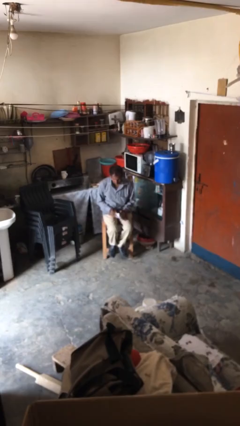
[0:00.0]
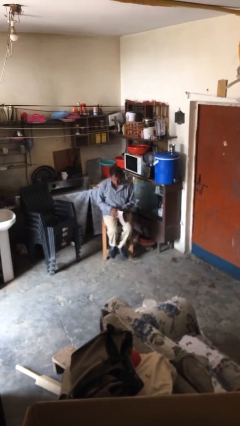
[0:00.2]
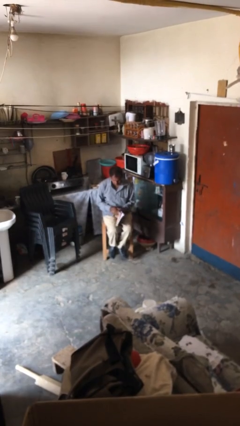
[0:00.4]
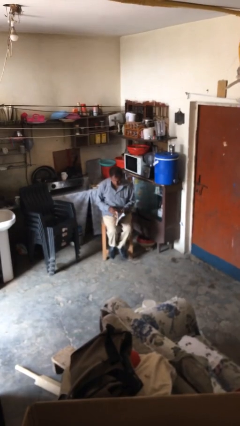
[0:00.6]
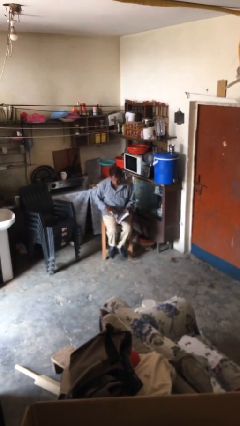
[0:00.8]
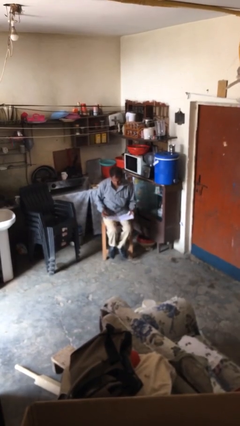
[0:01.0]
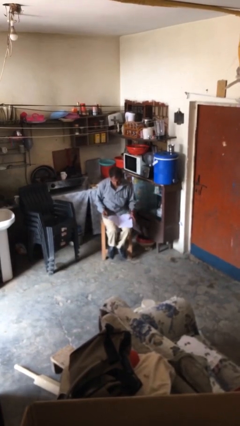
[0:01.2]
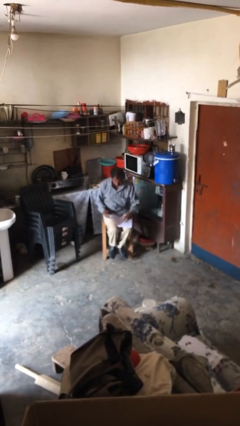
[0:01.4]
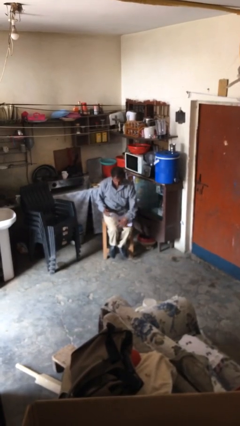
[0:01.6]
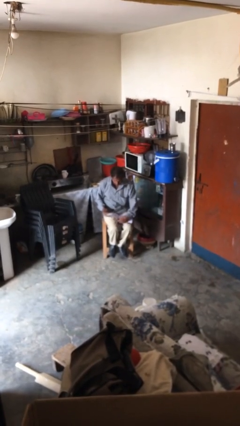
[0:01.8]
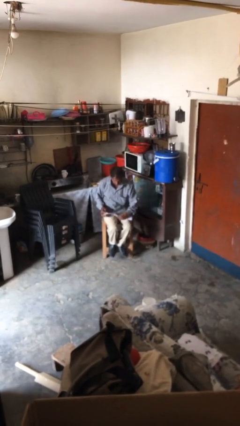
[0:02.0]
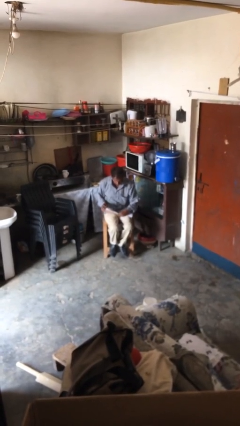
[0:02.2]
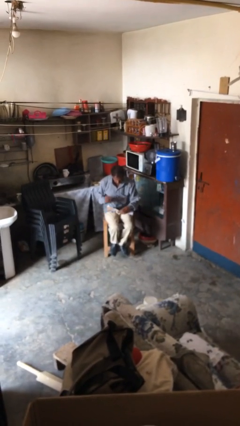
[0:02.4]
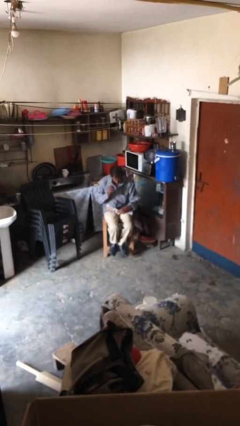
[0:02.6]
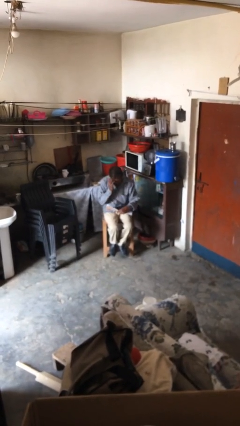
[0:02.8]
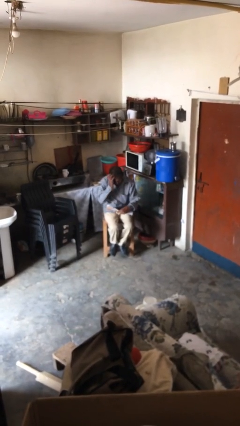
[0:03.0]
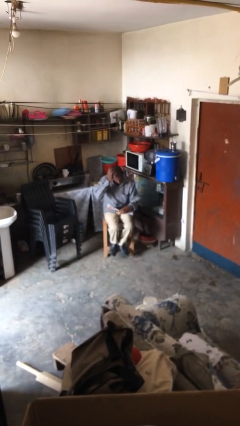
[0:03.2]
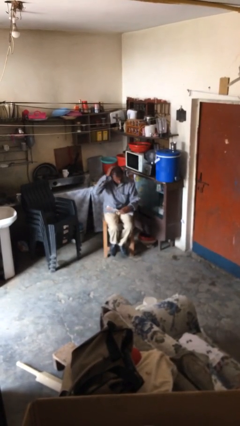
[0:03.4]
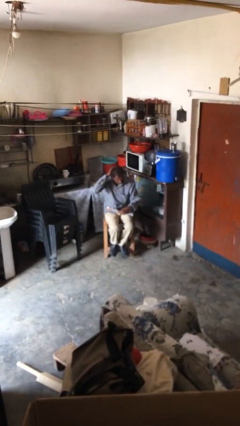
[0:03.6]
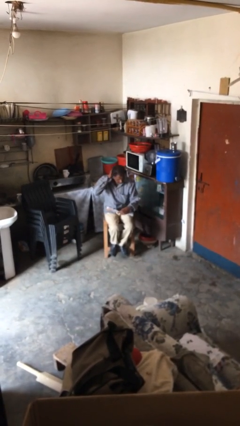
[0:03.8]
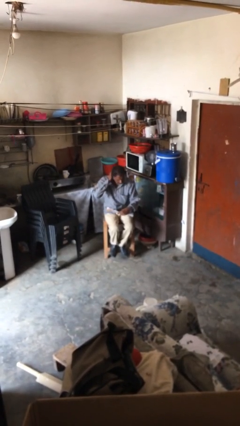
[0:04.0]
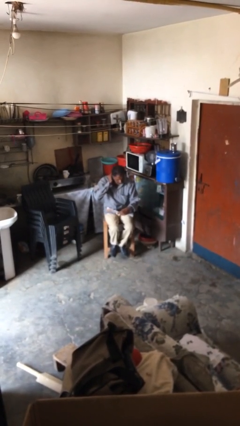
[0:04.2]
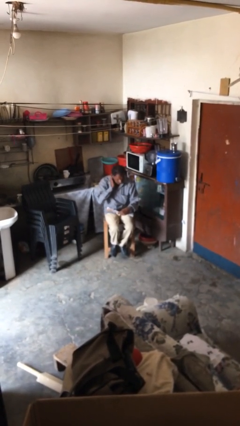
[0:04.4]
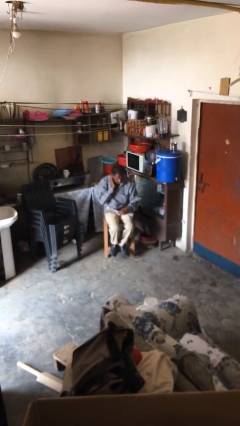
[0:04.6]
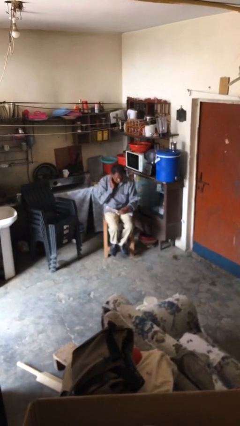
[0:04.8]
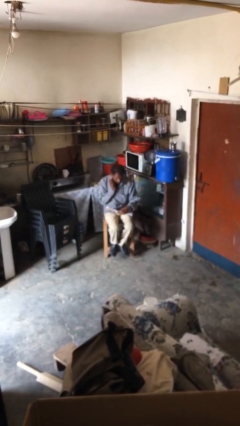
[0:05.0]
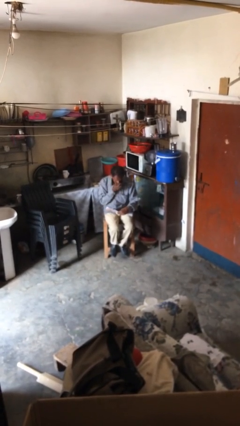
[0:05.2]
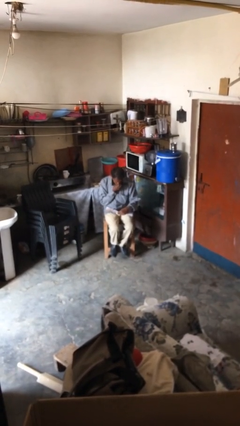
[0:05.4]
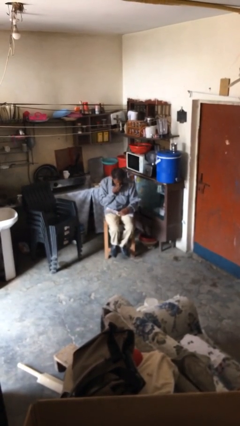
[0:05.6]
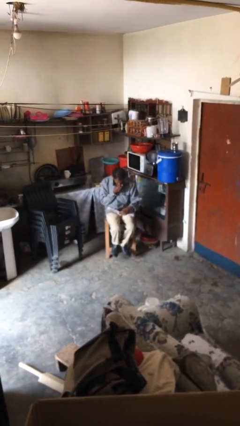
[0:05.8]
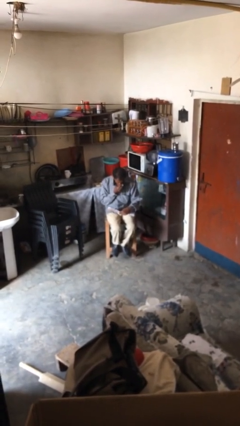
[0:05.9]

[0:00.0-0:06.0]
person reads document

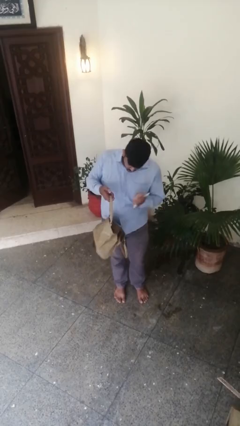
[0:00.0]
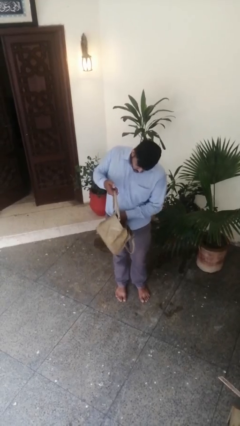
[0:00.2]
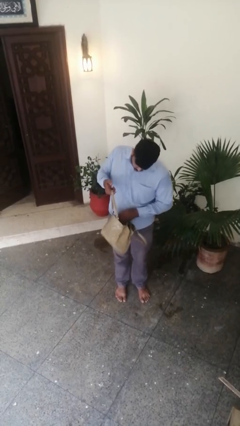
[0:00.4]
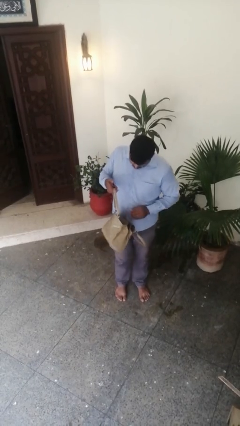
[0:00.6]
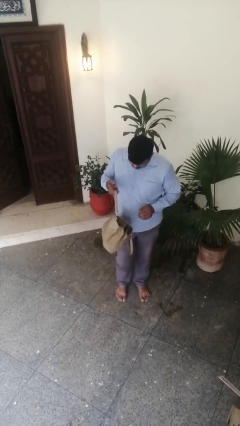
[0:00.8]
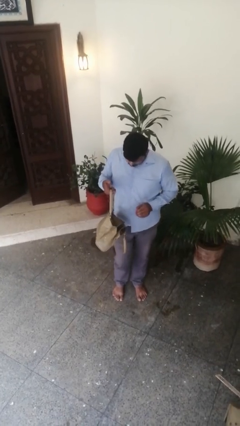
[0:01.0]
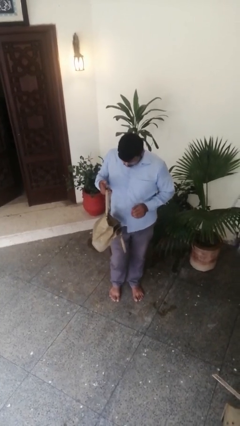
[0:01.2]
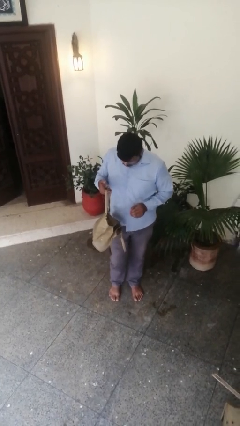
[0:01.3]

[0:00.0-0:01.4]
person puts object into purse

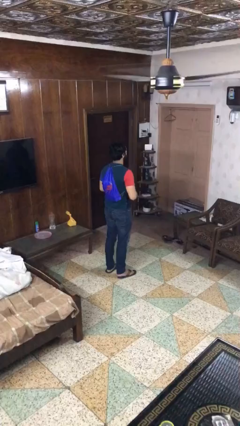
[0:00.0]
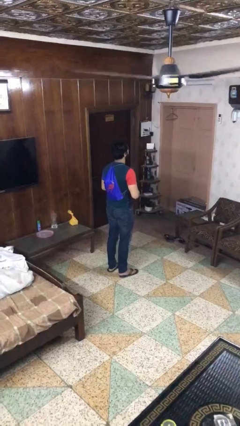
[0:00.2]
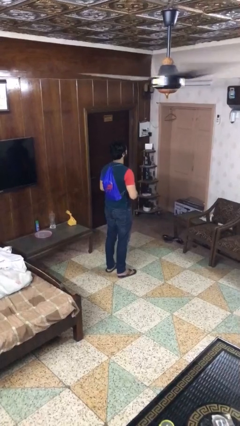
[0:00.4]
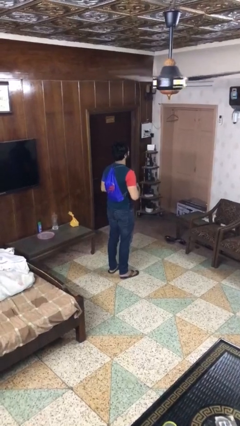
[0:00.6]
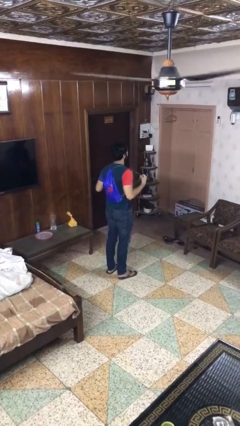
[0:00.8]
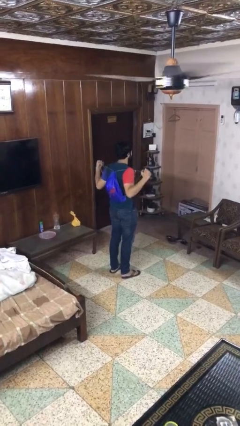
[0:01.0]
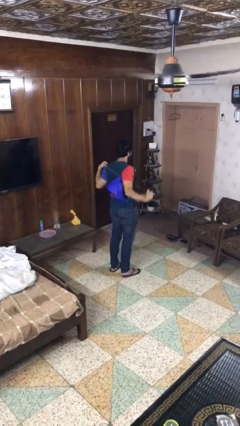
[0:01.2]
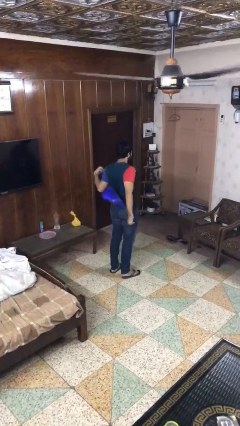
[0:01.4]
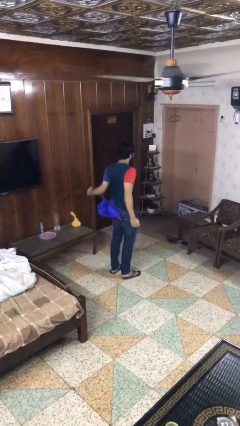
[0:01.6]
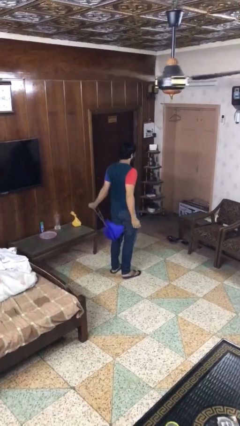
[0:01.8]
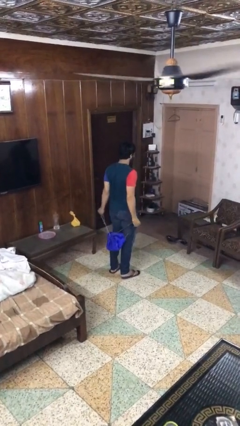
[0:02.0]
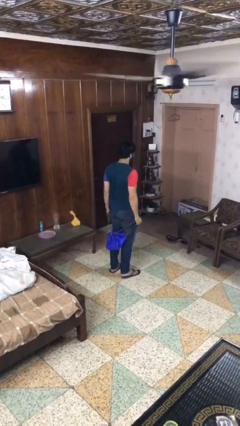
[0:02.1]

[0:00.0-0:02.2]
person takes off backpack

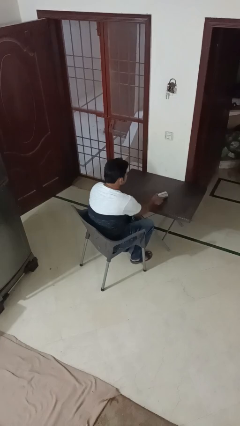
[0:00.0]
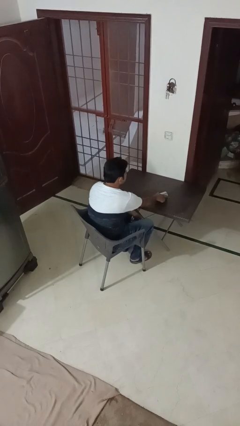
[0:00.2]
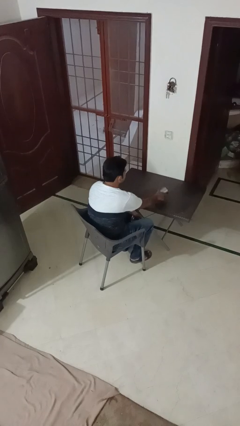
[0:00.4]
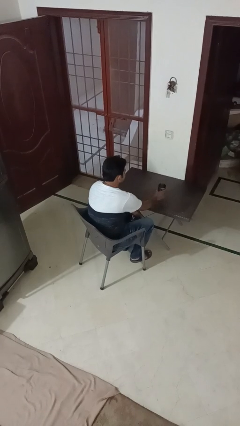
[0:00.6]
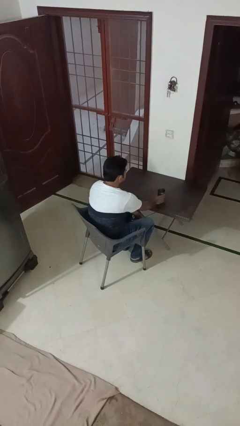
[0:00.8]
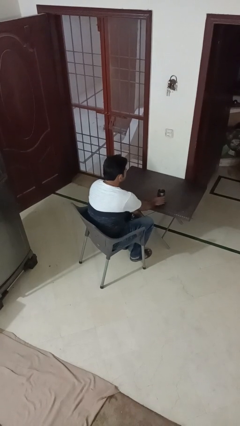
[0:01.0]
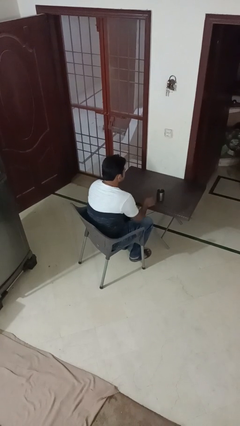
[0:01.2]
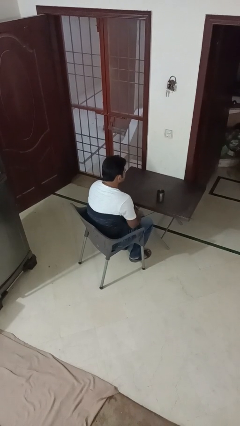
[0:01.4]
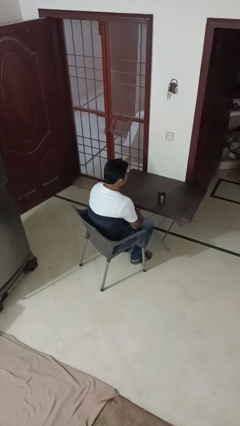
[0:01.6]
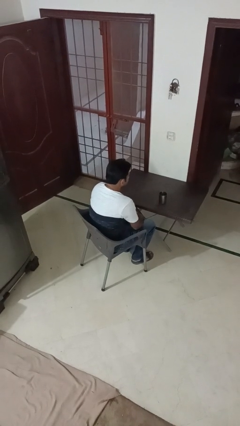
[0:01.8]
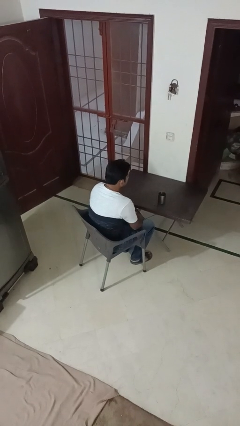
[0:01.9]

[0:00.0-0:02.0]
person sets upright glass

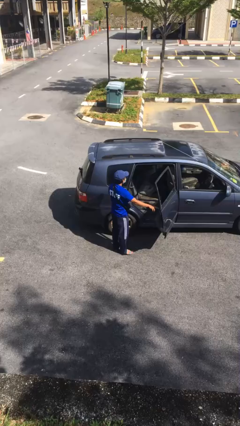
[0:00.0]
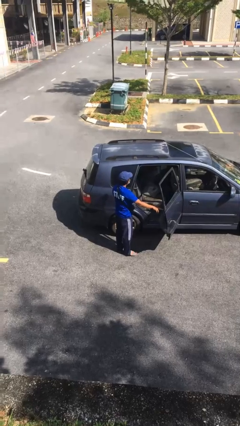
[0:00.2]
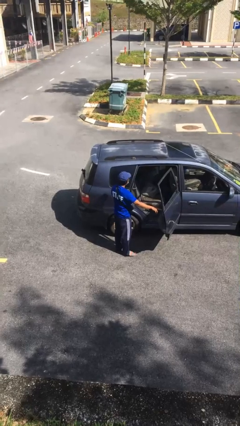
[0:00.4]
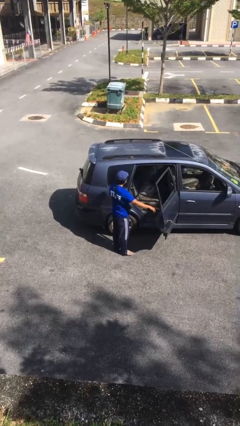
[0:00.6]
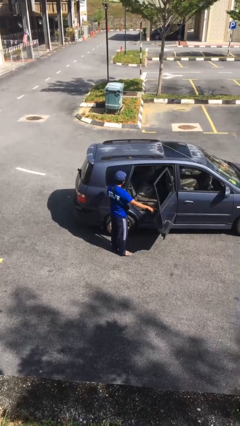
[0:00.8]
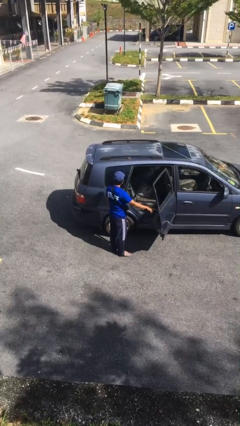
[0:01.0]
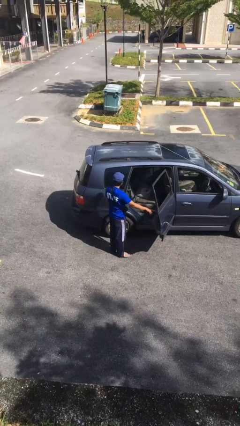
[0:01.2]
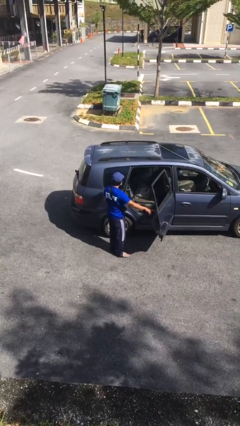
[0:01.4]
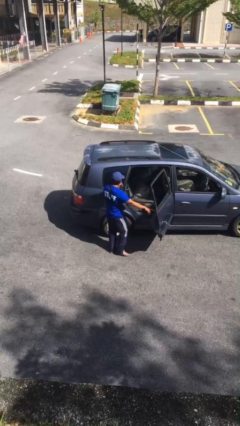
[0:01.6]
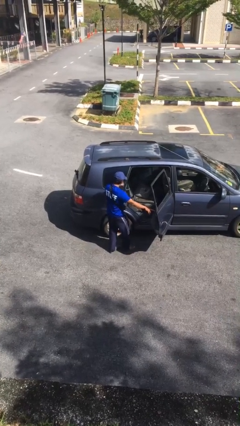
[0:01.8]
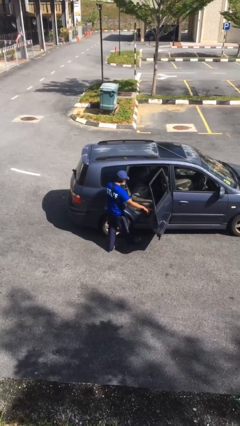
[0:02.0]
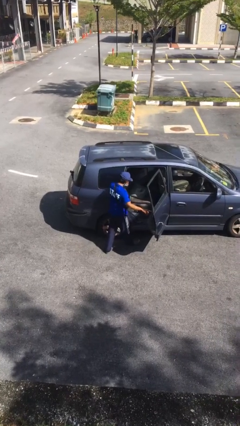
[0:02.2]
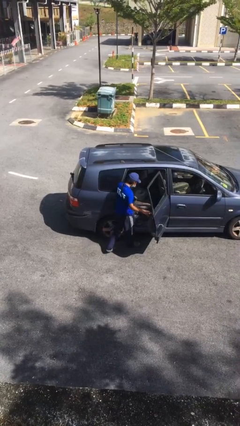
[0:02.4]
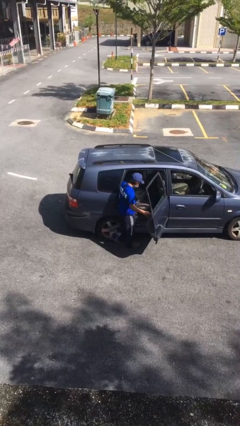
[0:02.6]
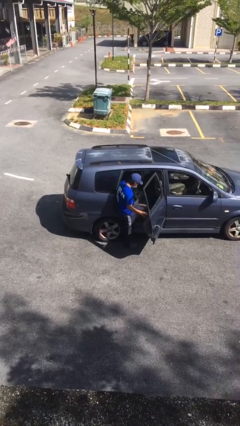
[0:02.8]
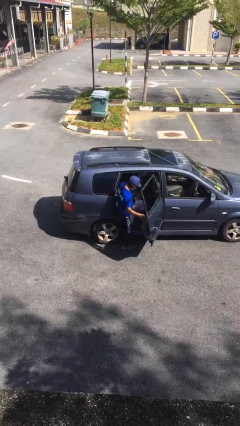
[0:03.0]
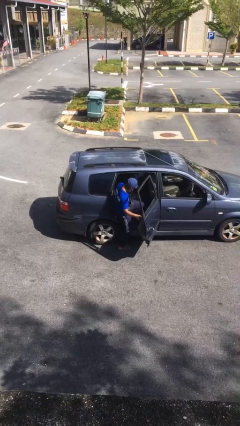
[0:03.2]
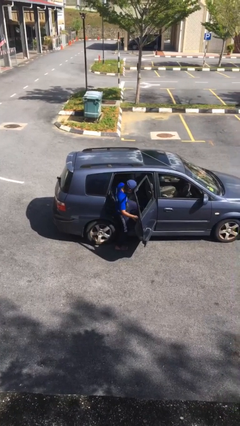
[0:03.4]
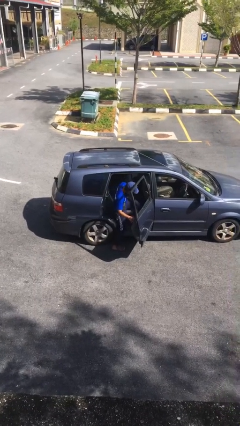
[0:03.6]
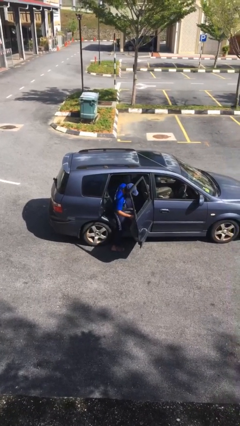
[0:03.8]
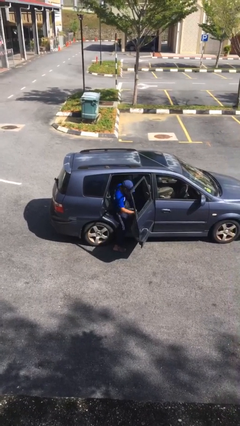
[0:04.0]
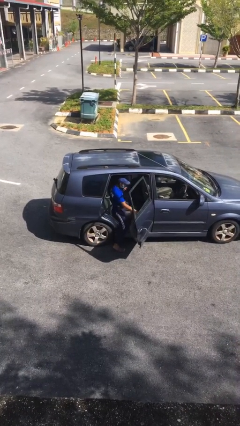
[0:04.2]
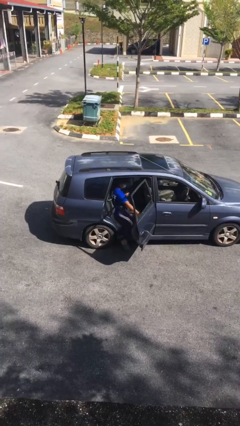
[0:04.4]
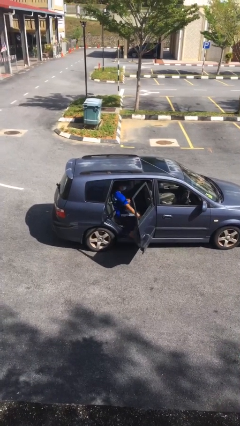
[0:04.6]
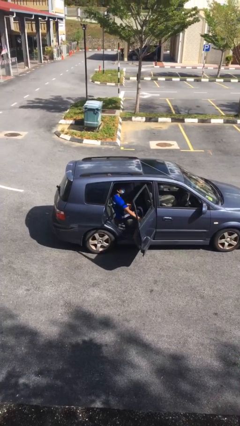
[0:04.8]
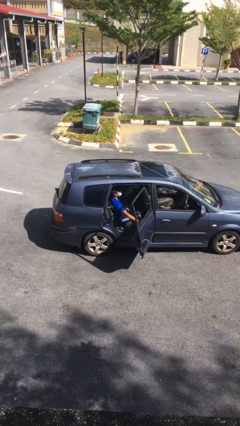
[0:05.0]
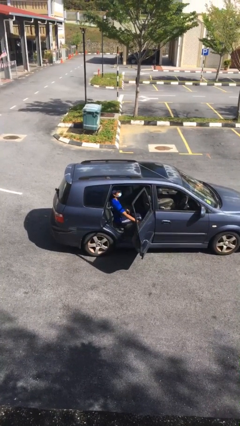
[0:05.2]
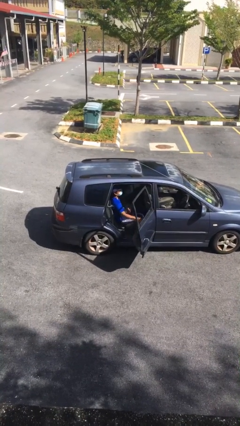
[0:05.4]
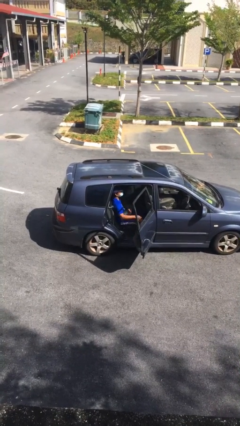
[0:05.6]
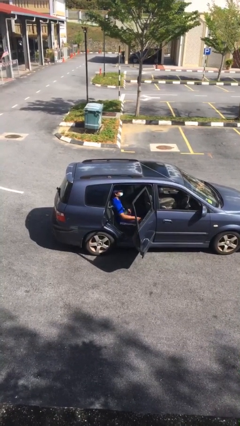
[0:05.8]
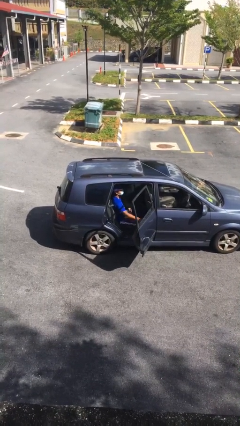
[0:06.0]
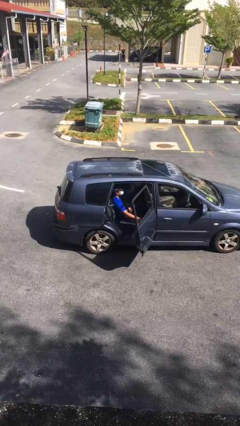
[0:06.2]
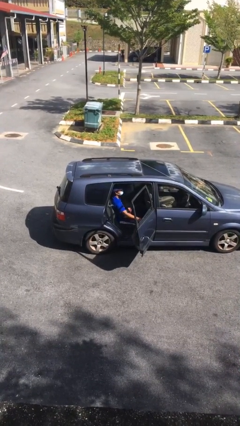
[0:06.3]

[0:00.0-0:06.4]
person enters car
